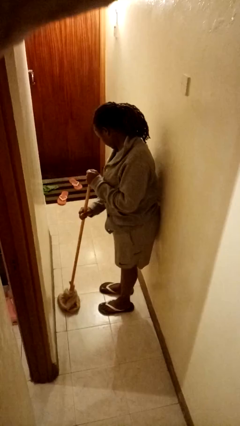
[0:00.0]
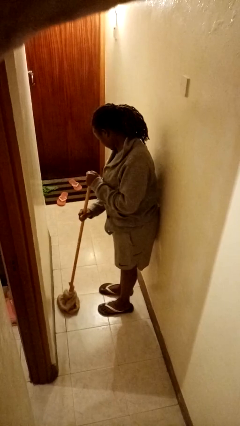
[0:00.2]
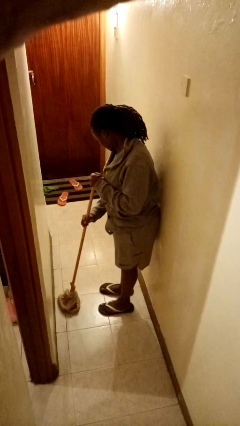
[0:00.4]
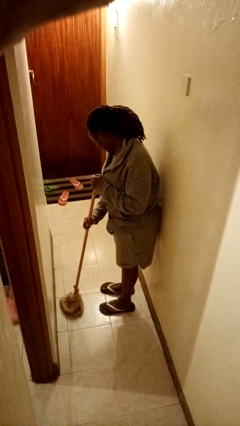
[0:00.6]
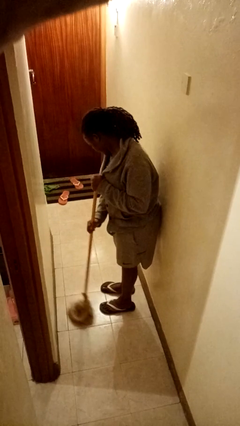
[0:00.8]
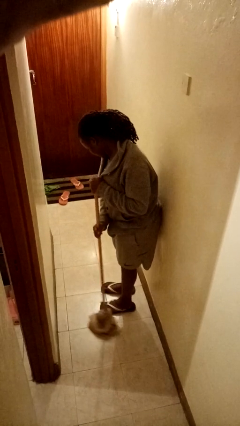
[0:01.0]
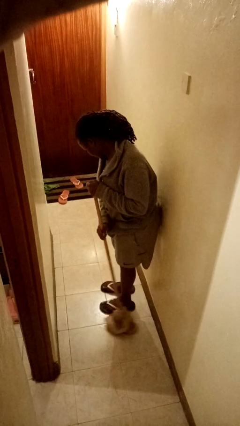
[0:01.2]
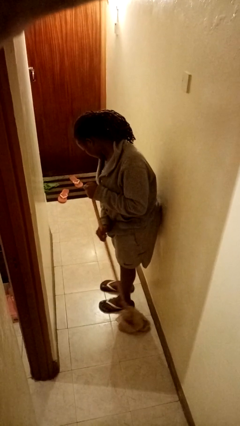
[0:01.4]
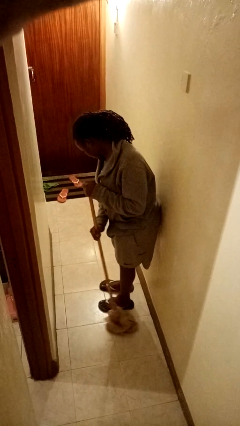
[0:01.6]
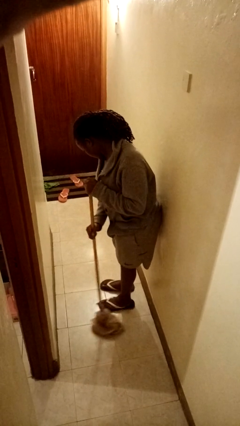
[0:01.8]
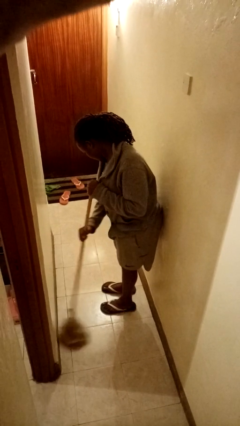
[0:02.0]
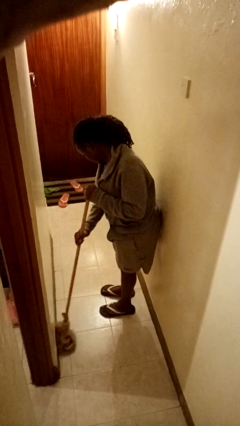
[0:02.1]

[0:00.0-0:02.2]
person mops

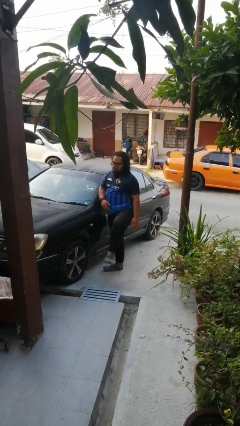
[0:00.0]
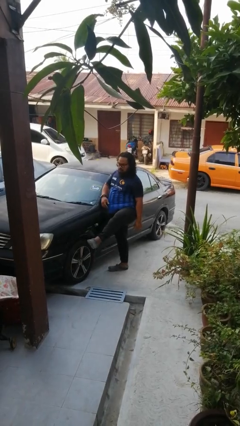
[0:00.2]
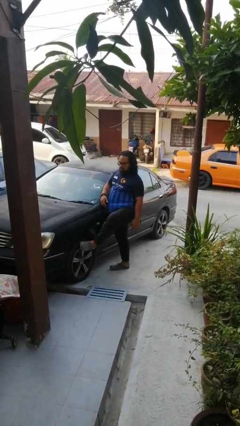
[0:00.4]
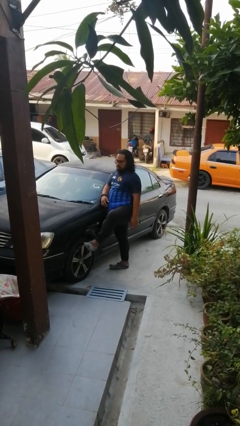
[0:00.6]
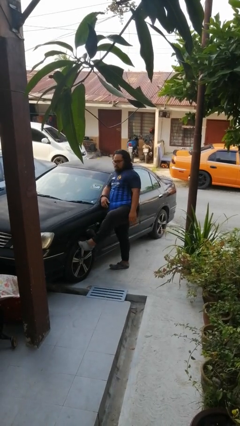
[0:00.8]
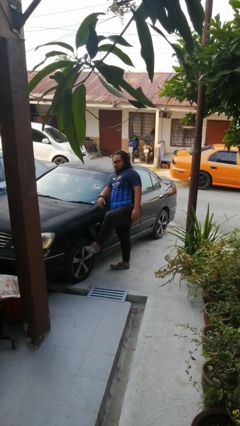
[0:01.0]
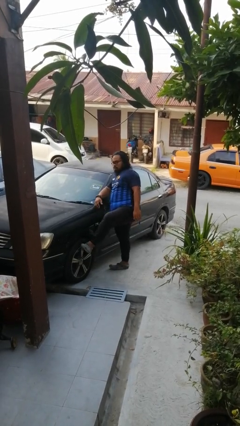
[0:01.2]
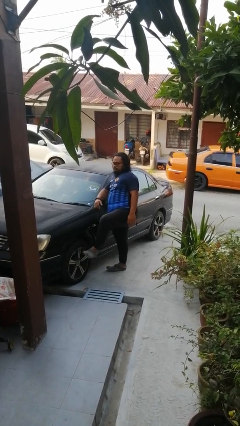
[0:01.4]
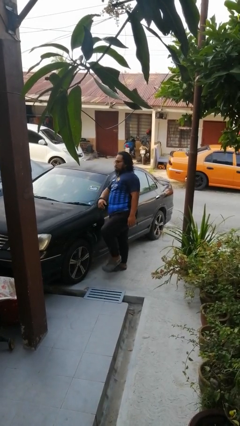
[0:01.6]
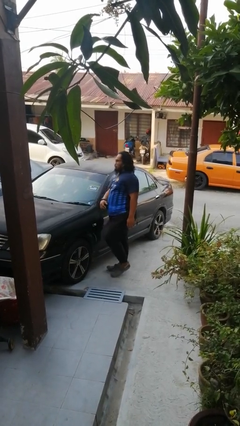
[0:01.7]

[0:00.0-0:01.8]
person kicks car tires

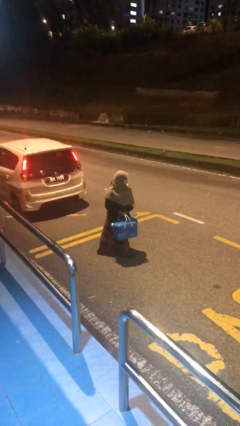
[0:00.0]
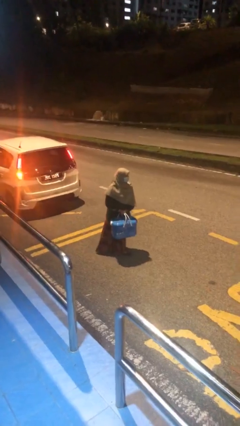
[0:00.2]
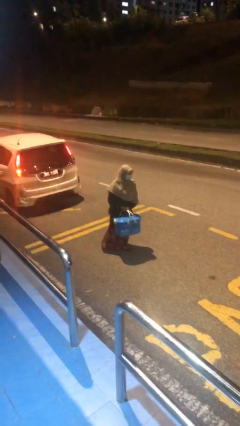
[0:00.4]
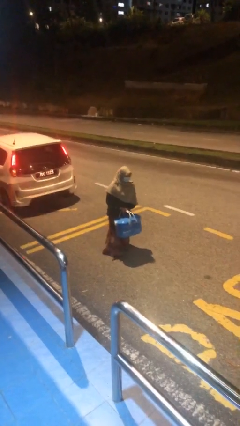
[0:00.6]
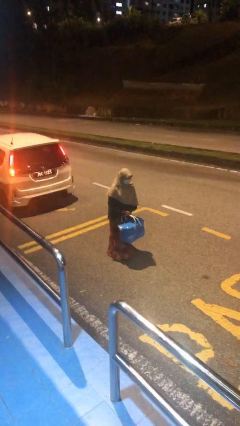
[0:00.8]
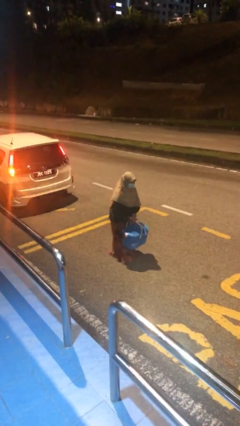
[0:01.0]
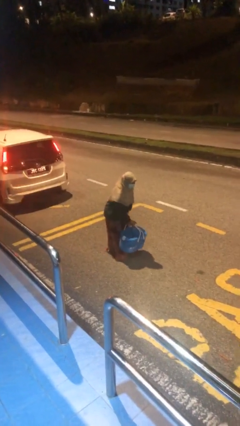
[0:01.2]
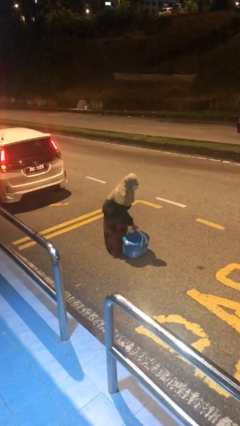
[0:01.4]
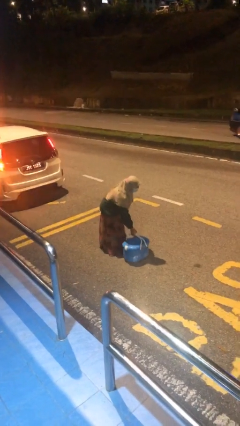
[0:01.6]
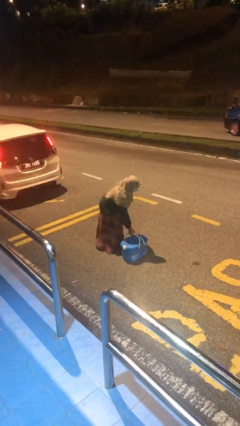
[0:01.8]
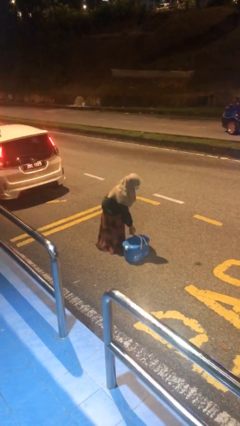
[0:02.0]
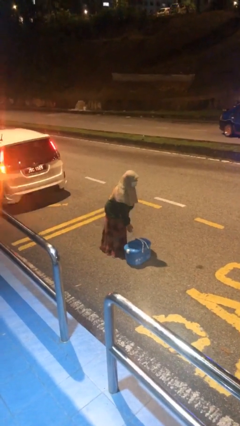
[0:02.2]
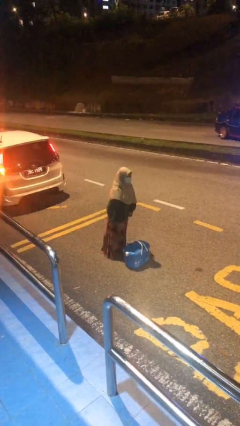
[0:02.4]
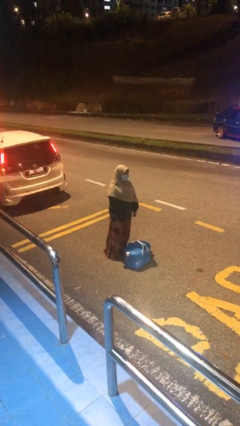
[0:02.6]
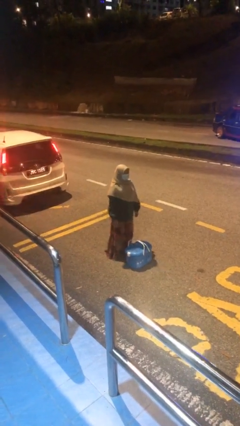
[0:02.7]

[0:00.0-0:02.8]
person puts down object on floor

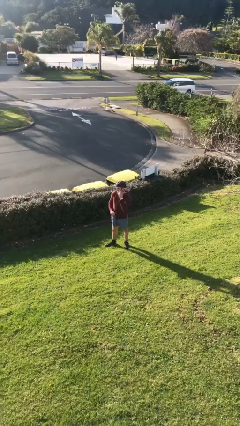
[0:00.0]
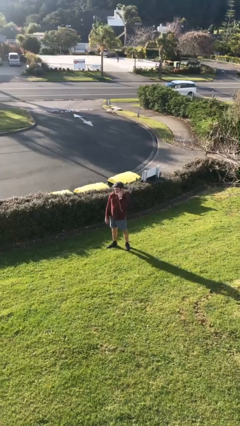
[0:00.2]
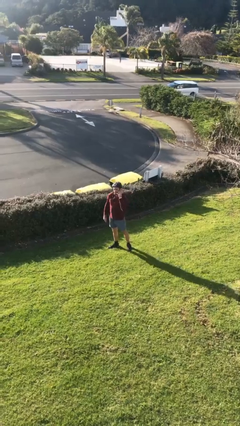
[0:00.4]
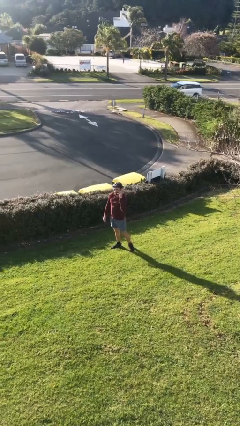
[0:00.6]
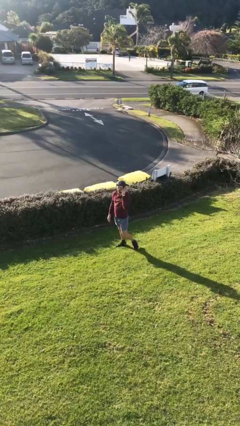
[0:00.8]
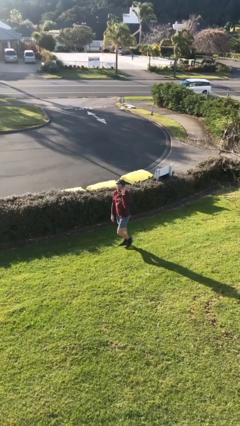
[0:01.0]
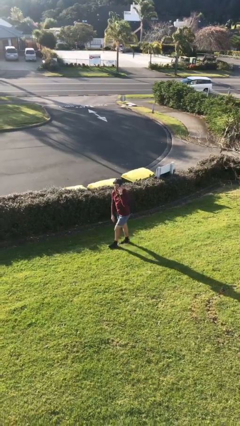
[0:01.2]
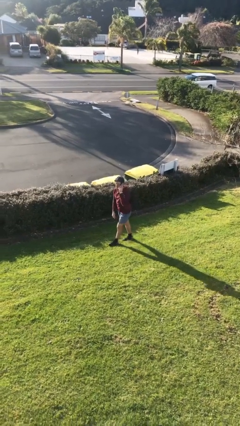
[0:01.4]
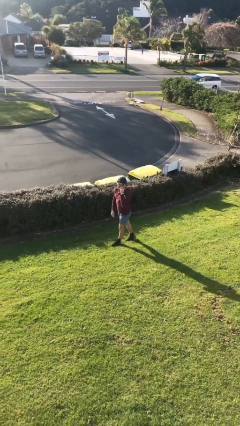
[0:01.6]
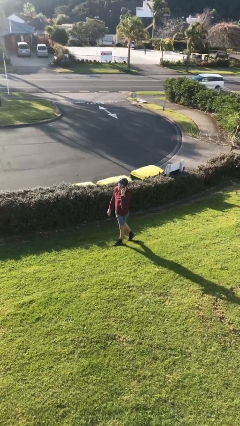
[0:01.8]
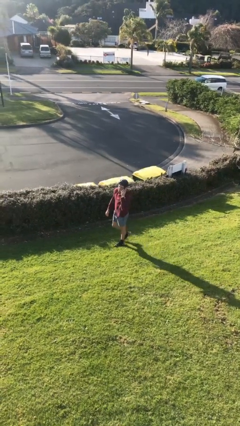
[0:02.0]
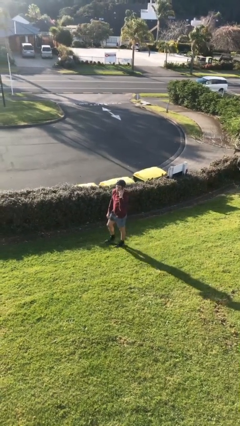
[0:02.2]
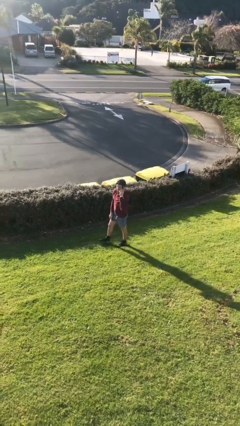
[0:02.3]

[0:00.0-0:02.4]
person talks on phone

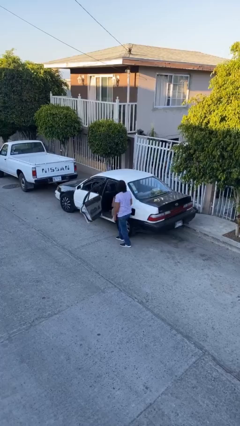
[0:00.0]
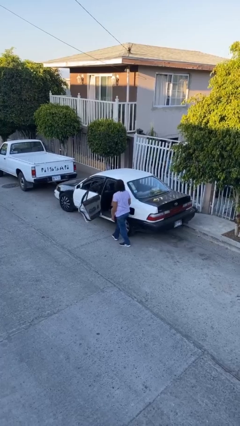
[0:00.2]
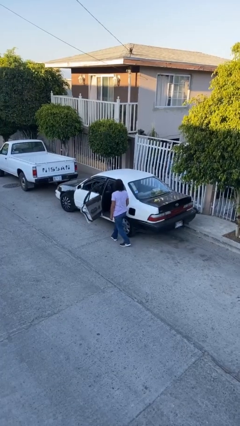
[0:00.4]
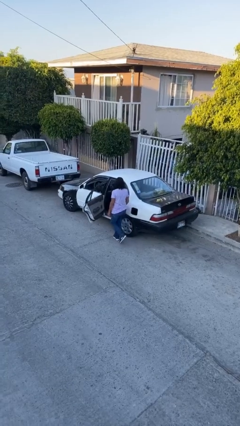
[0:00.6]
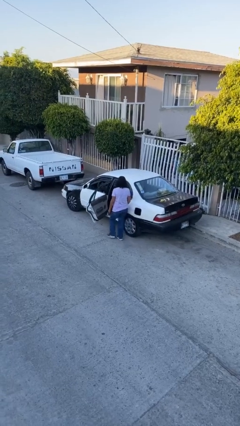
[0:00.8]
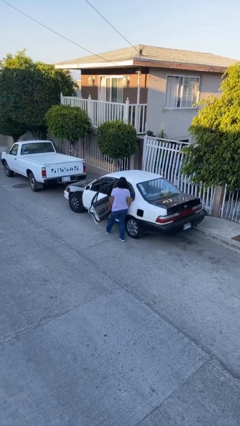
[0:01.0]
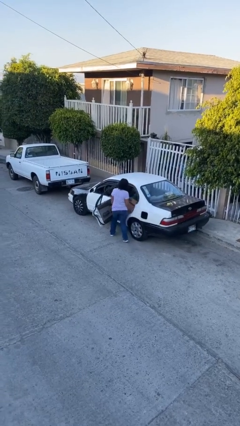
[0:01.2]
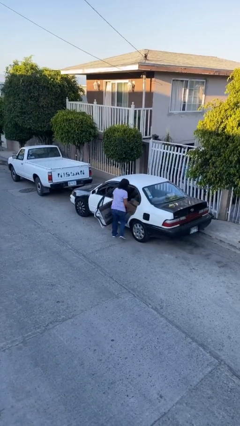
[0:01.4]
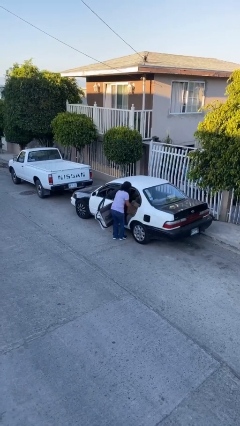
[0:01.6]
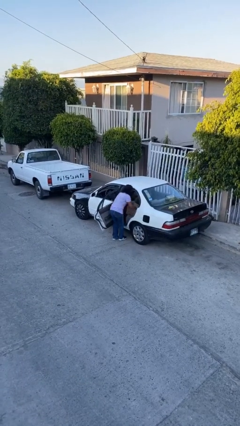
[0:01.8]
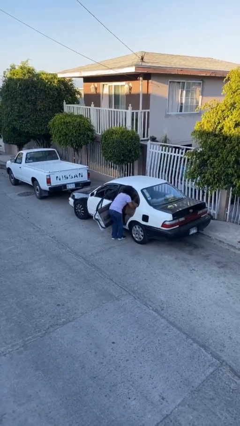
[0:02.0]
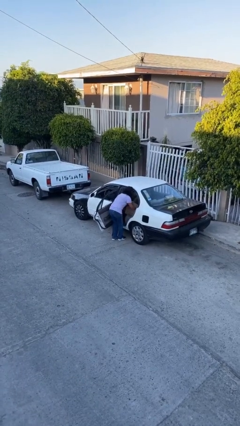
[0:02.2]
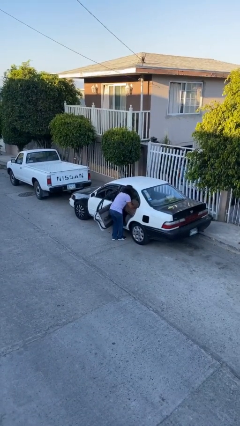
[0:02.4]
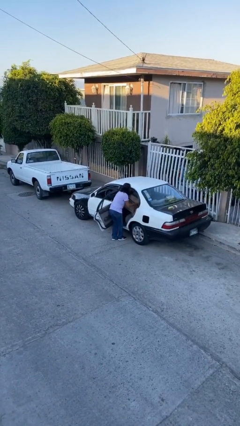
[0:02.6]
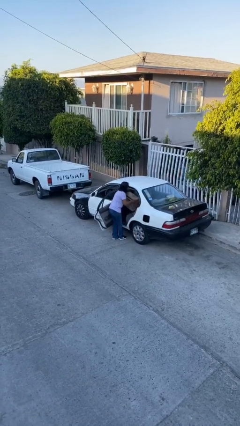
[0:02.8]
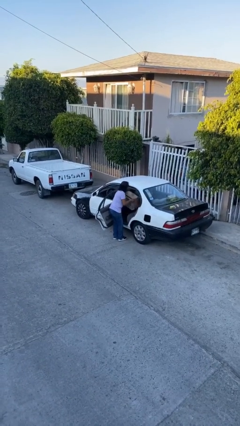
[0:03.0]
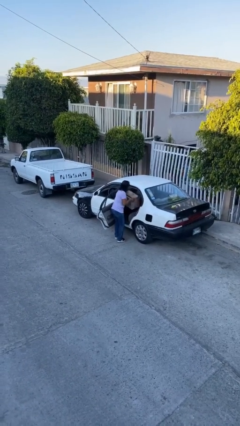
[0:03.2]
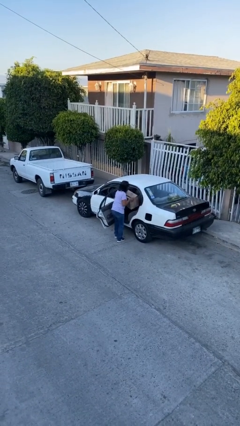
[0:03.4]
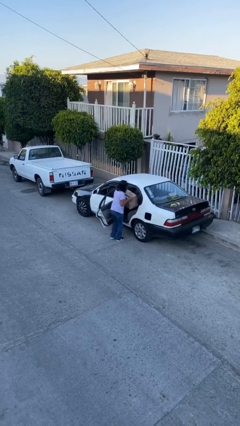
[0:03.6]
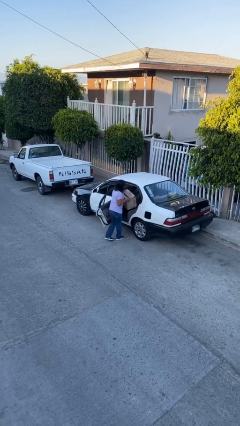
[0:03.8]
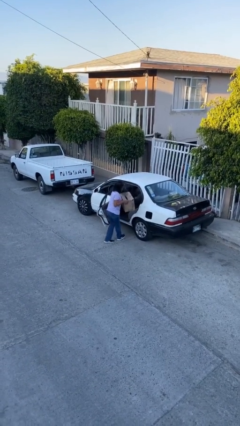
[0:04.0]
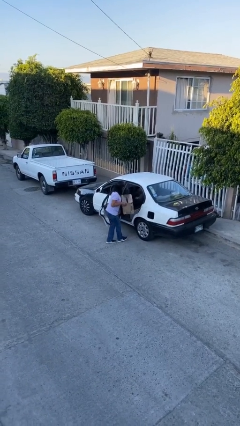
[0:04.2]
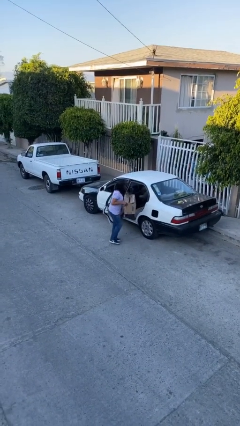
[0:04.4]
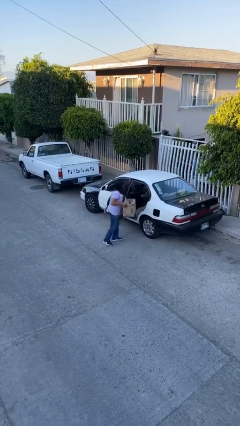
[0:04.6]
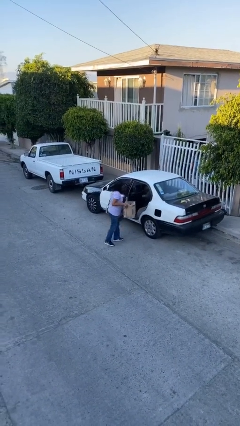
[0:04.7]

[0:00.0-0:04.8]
person unloads car

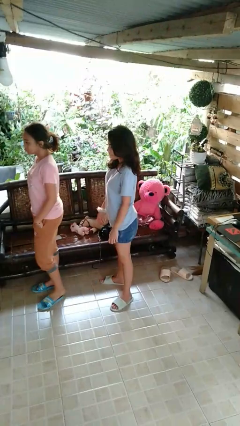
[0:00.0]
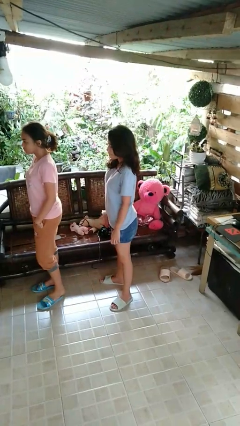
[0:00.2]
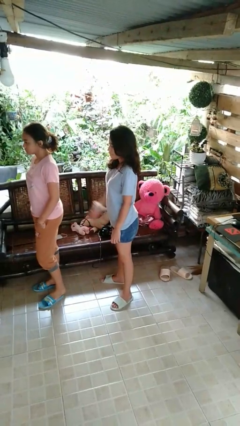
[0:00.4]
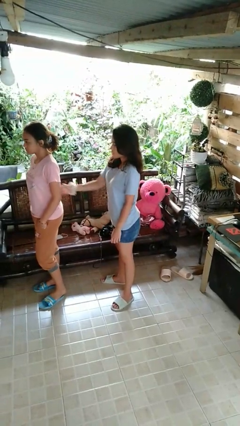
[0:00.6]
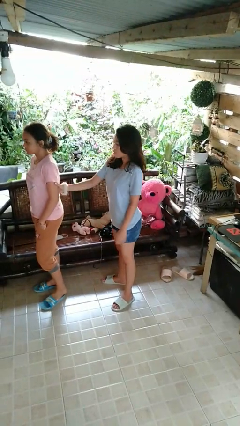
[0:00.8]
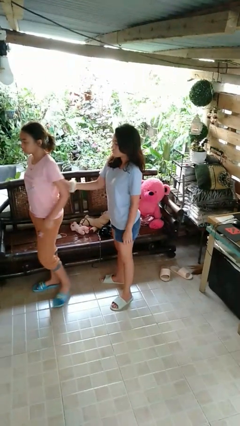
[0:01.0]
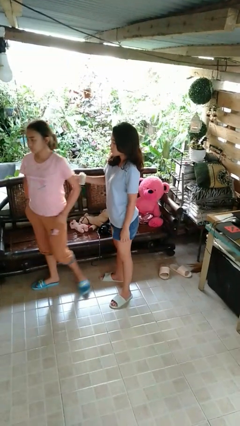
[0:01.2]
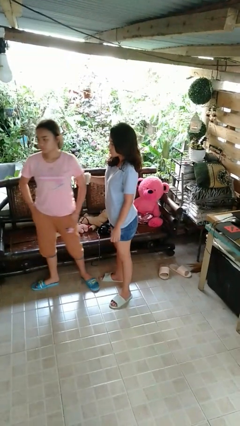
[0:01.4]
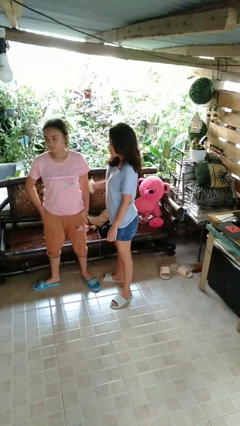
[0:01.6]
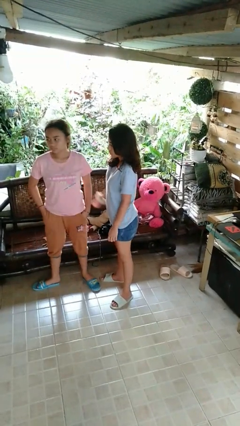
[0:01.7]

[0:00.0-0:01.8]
person grabs person by bicep

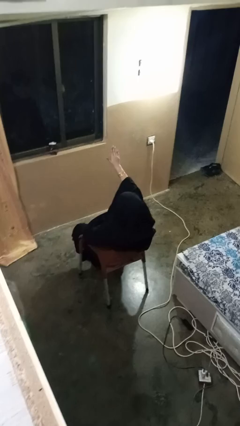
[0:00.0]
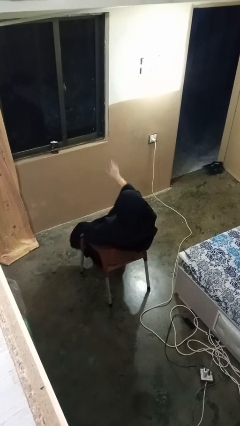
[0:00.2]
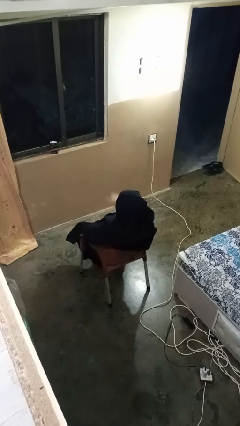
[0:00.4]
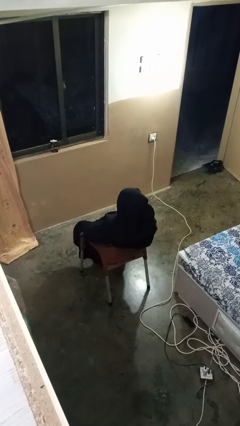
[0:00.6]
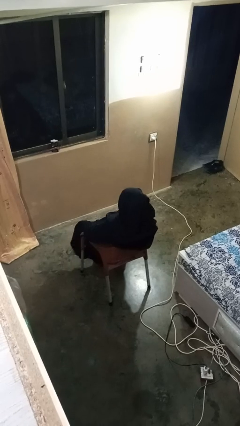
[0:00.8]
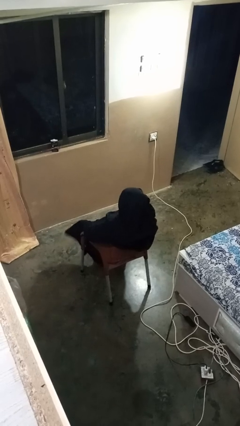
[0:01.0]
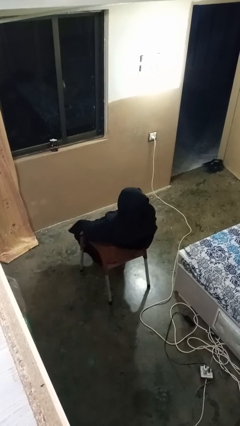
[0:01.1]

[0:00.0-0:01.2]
person gestures swipe down
